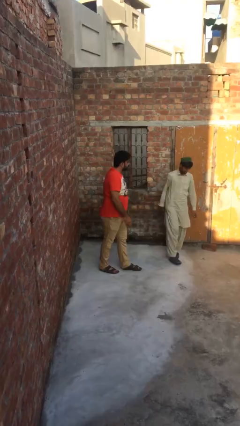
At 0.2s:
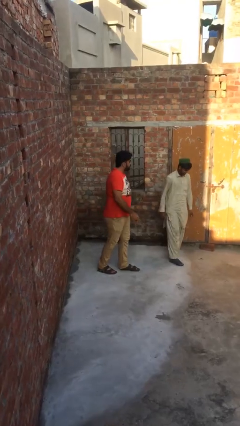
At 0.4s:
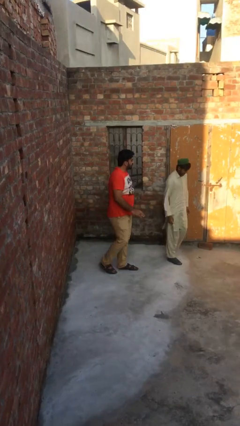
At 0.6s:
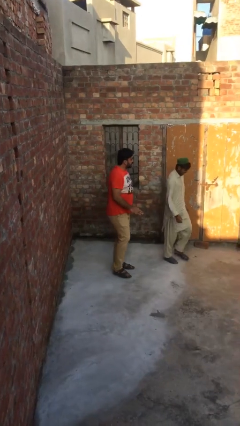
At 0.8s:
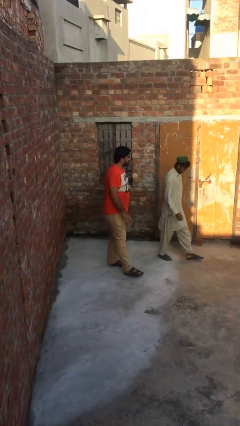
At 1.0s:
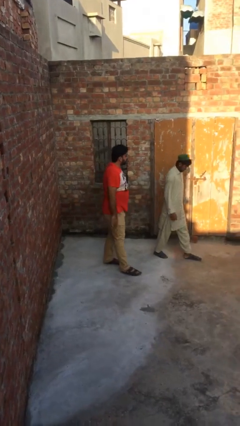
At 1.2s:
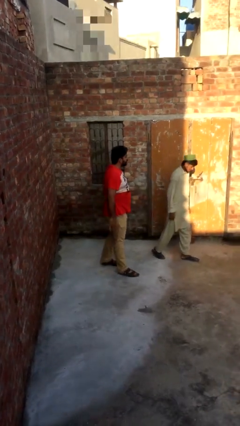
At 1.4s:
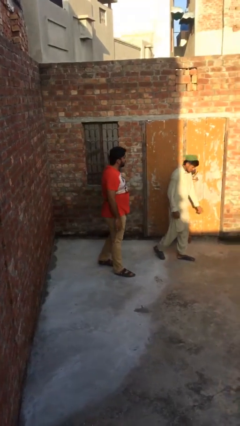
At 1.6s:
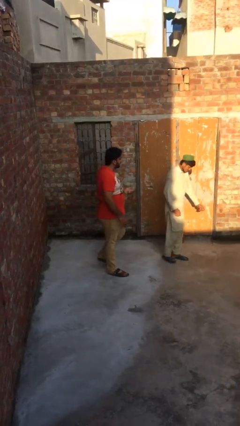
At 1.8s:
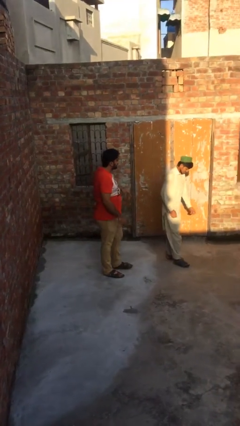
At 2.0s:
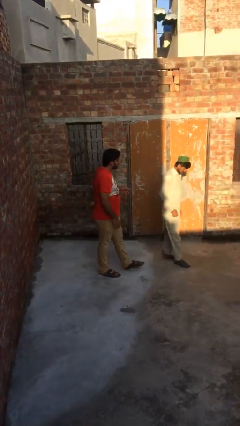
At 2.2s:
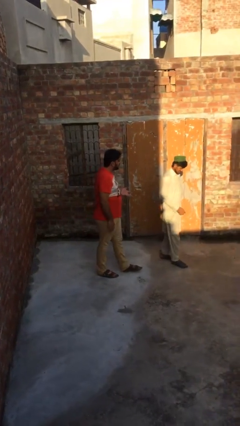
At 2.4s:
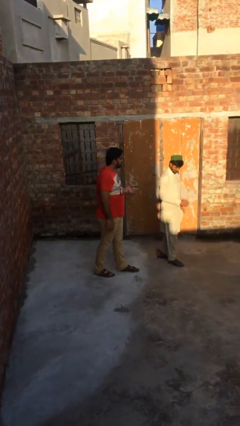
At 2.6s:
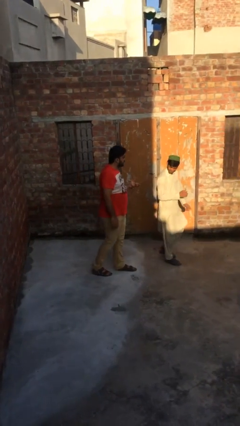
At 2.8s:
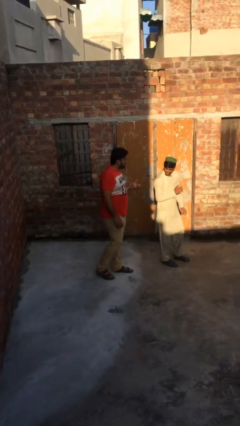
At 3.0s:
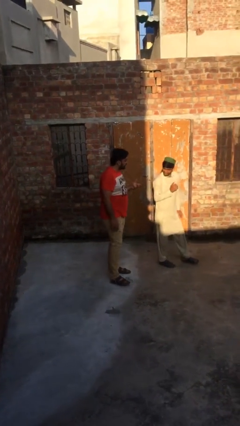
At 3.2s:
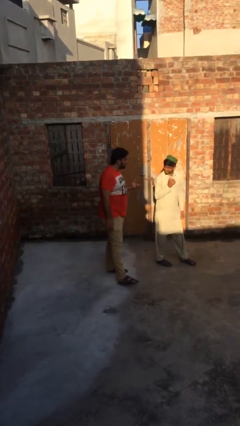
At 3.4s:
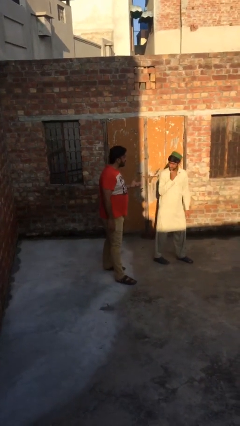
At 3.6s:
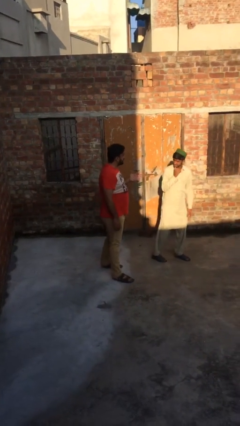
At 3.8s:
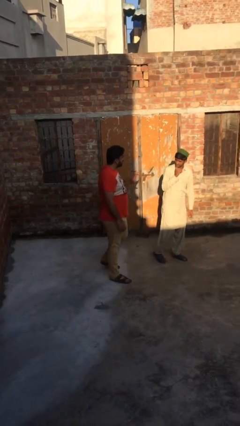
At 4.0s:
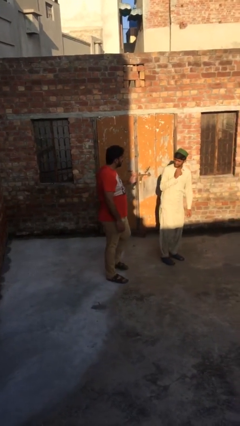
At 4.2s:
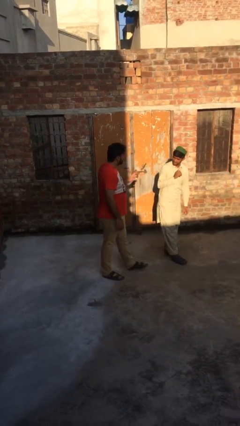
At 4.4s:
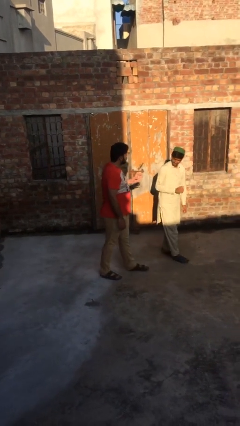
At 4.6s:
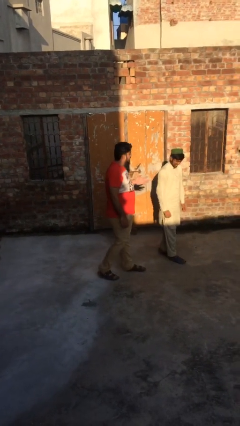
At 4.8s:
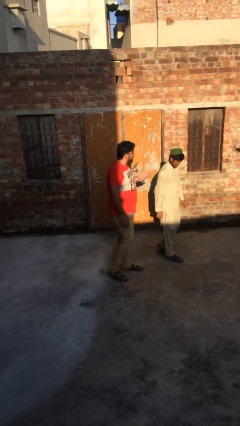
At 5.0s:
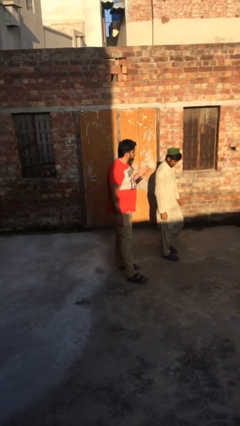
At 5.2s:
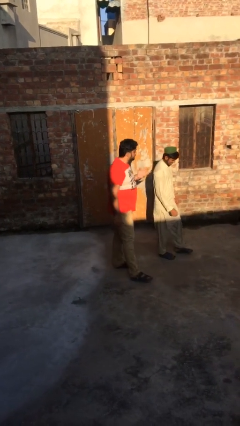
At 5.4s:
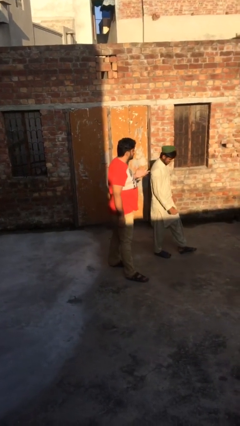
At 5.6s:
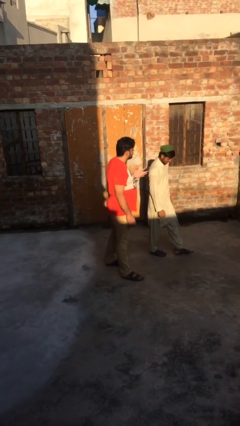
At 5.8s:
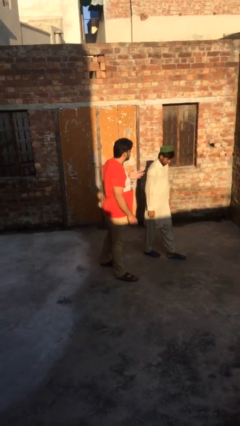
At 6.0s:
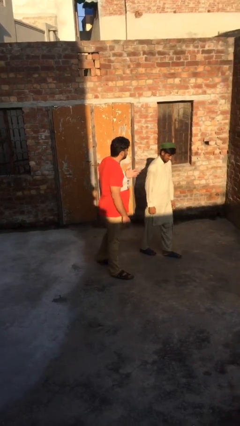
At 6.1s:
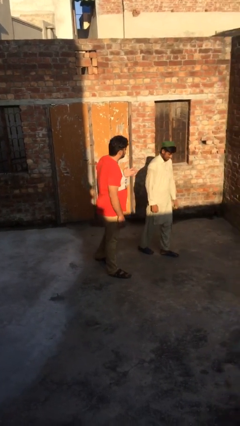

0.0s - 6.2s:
person talks to person

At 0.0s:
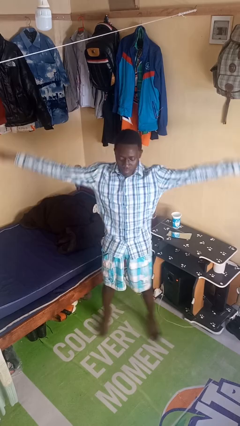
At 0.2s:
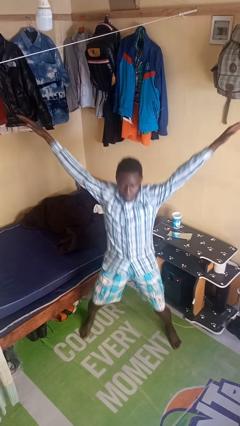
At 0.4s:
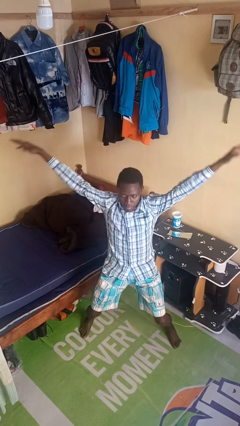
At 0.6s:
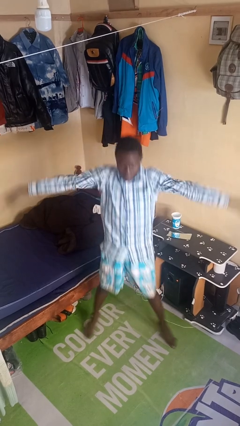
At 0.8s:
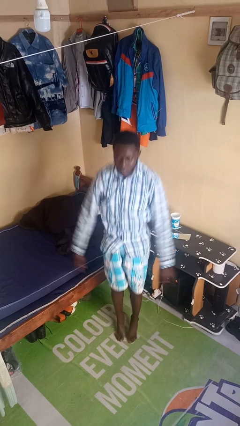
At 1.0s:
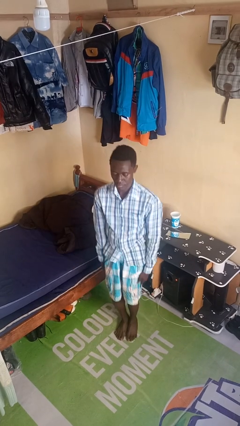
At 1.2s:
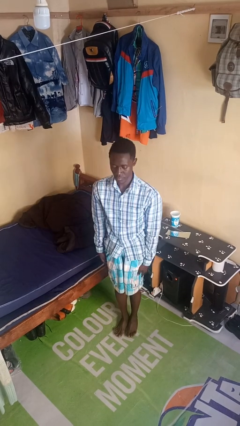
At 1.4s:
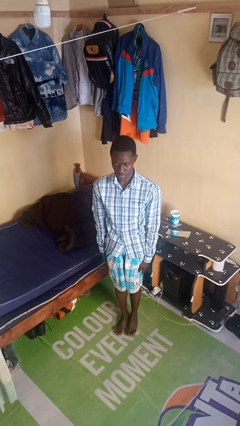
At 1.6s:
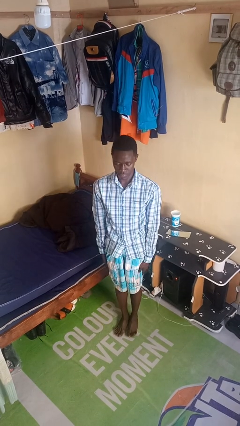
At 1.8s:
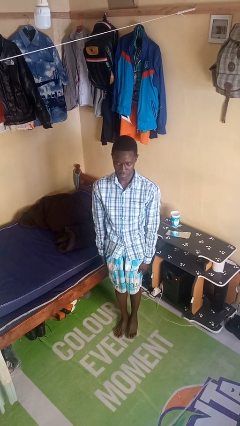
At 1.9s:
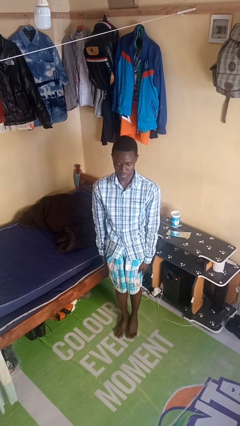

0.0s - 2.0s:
person exercises with jumping jacks

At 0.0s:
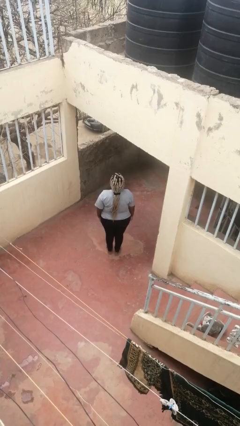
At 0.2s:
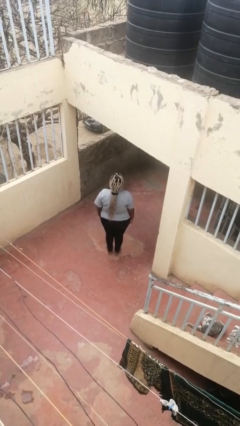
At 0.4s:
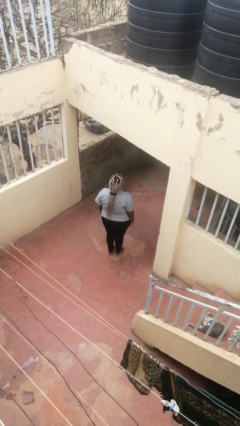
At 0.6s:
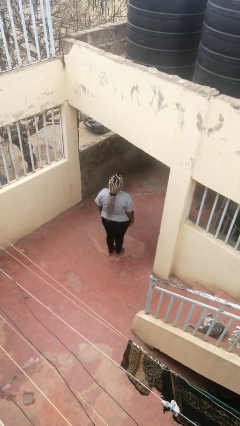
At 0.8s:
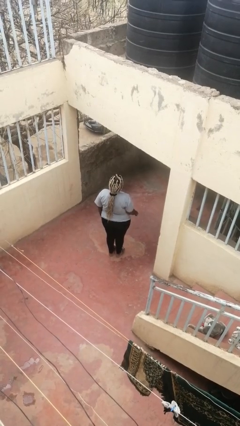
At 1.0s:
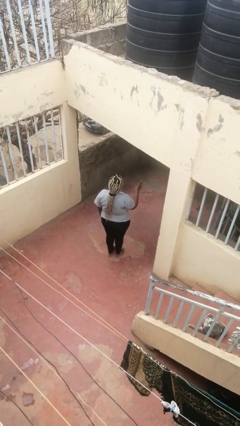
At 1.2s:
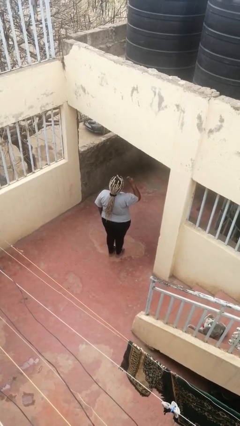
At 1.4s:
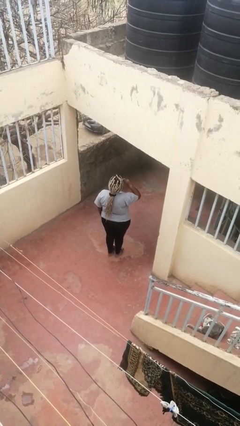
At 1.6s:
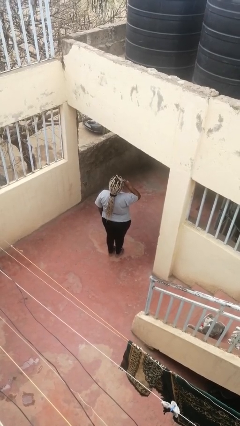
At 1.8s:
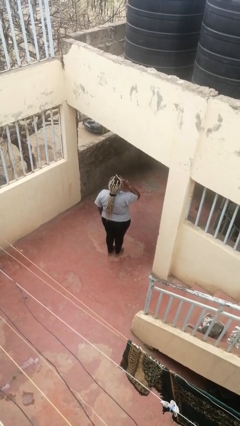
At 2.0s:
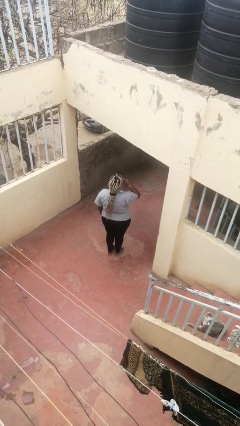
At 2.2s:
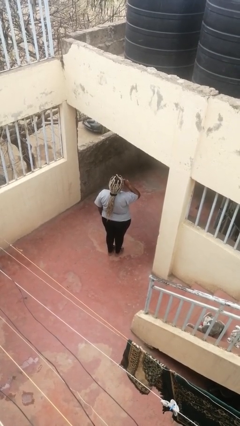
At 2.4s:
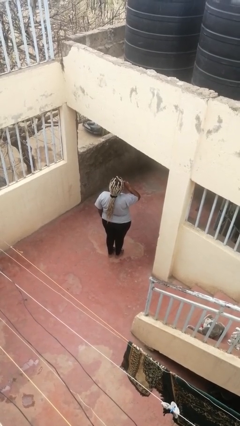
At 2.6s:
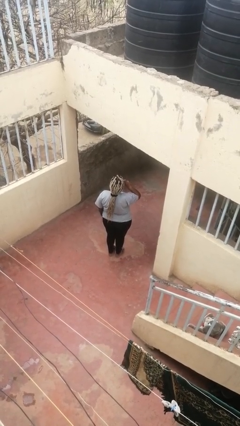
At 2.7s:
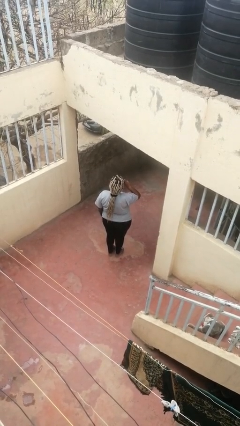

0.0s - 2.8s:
person salutes

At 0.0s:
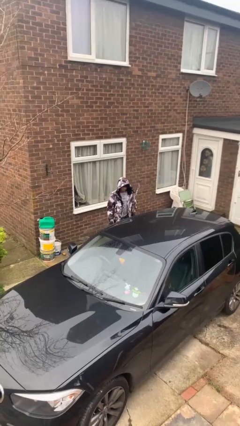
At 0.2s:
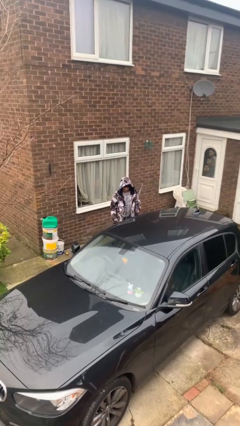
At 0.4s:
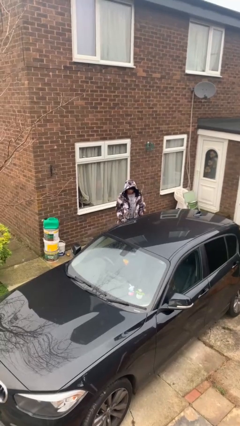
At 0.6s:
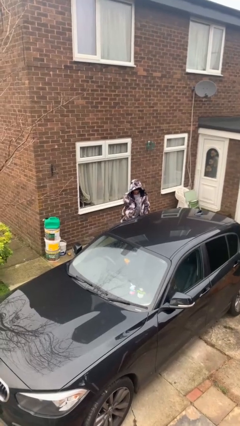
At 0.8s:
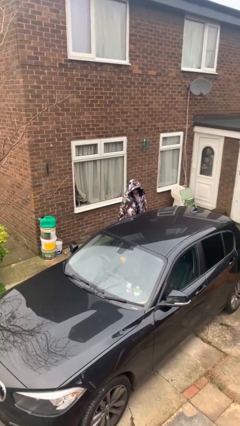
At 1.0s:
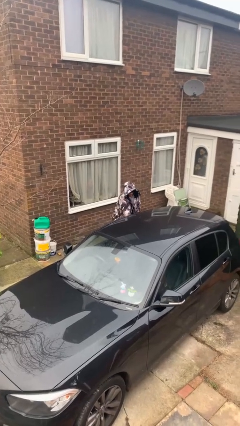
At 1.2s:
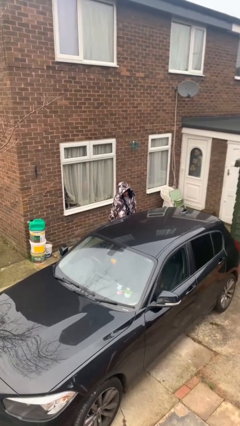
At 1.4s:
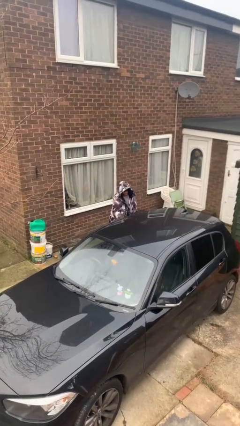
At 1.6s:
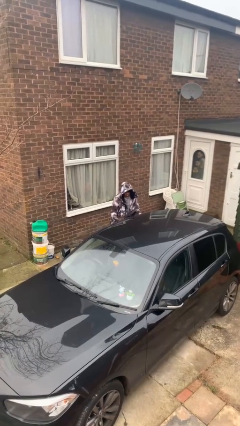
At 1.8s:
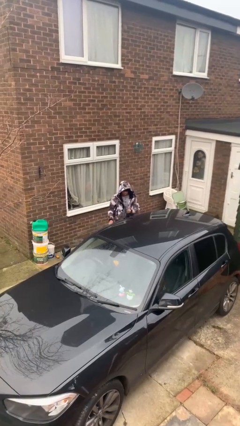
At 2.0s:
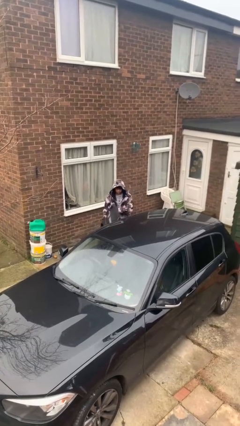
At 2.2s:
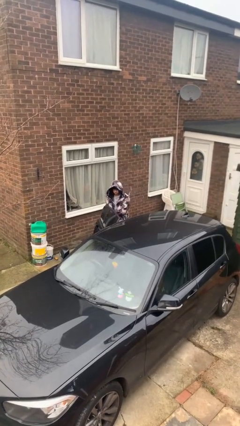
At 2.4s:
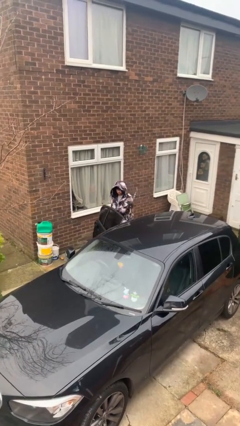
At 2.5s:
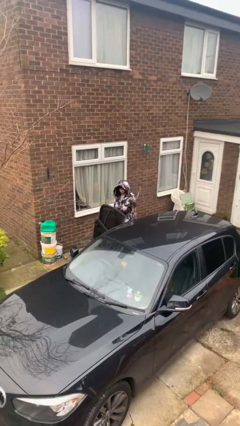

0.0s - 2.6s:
person opens car door

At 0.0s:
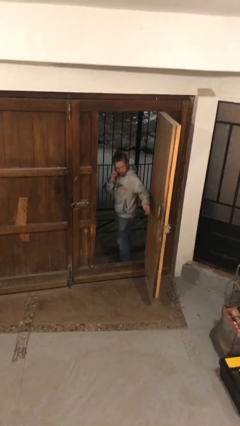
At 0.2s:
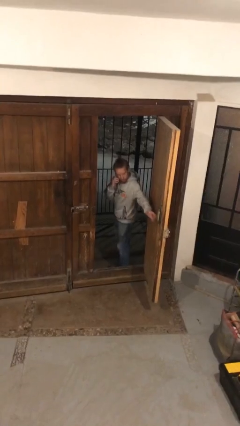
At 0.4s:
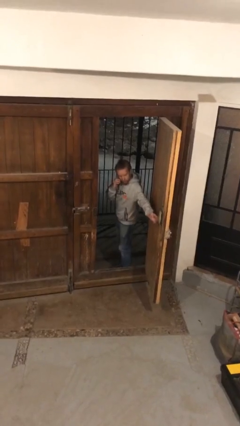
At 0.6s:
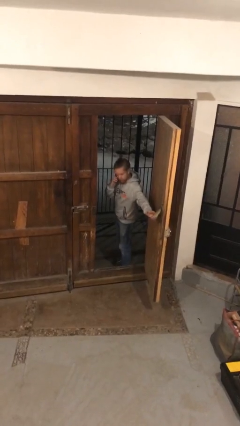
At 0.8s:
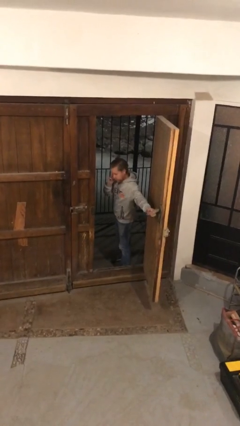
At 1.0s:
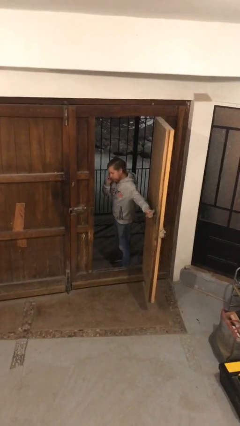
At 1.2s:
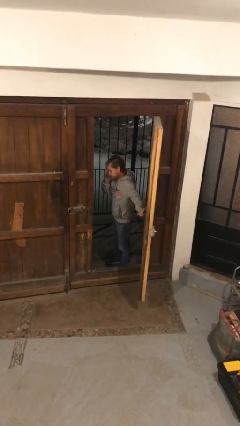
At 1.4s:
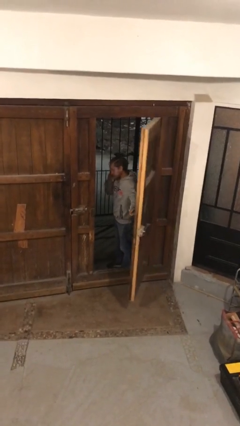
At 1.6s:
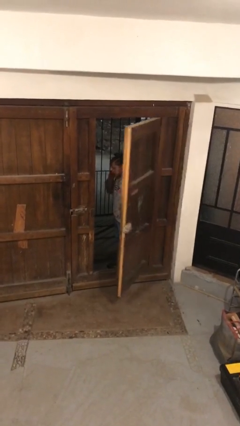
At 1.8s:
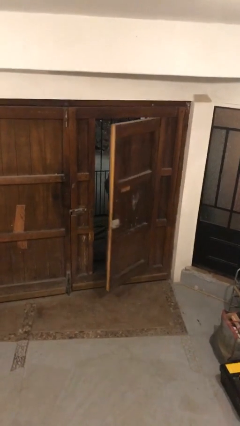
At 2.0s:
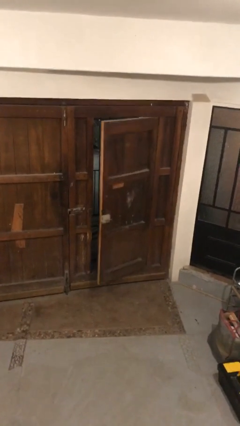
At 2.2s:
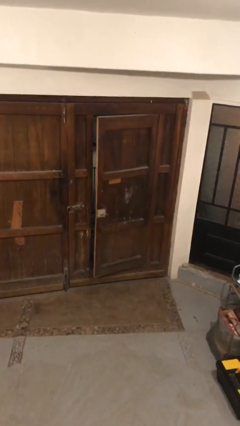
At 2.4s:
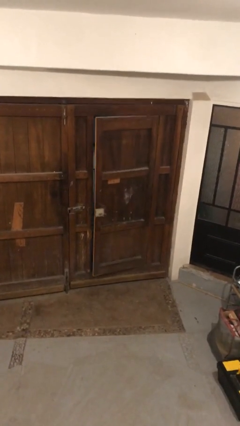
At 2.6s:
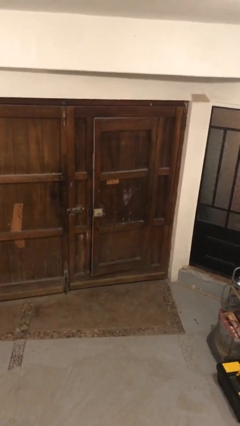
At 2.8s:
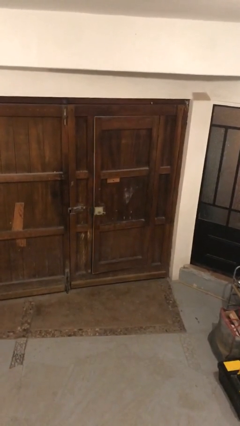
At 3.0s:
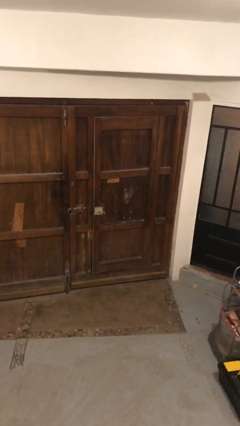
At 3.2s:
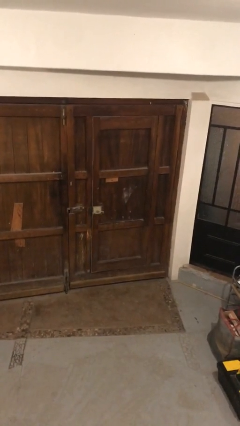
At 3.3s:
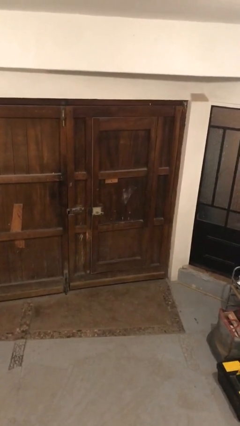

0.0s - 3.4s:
person closes facility door

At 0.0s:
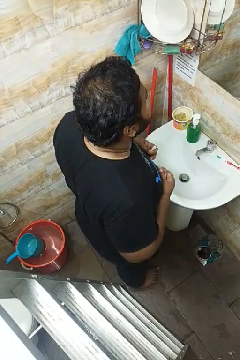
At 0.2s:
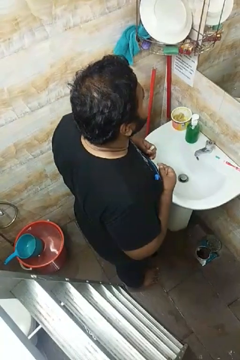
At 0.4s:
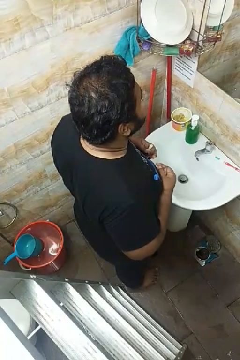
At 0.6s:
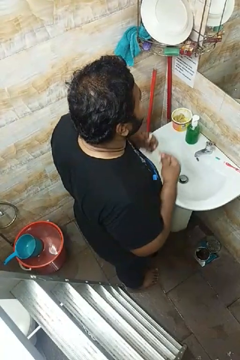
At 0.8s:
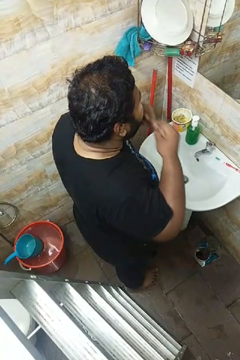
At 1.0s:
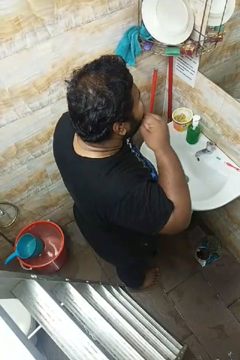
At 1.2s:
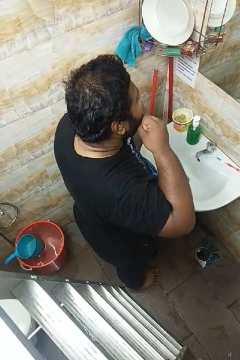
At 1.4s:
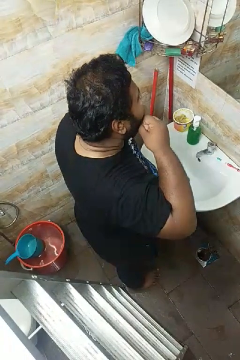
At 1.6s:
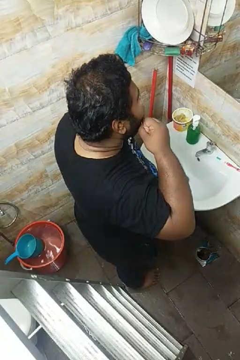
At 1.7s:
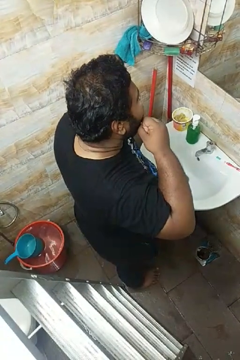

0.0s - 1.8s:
person flosses
